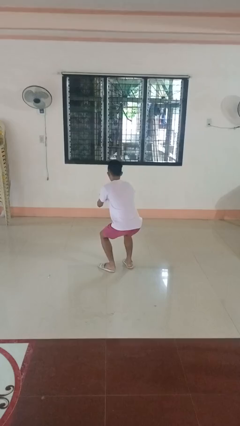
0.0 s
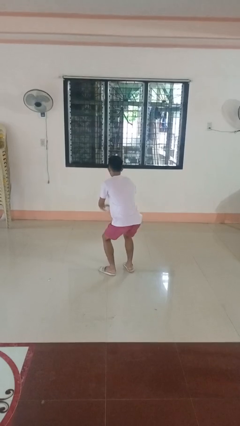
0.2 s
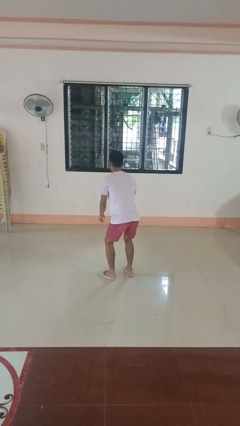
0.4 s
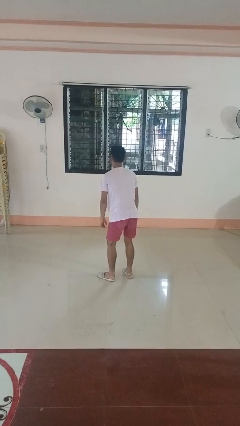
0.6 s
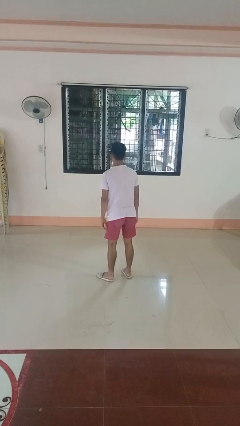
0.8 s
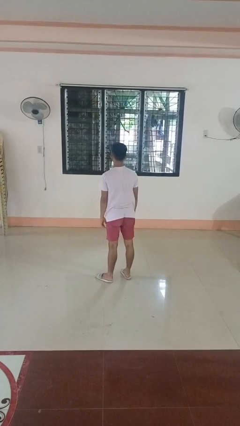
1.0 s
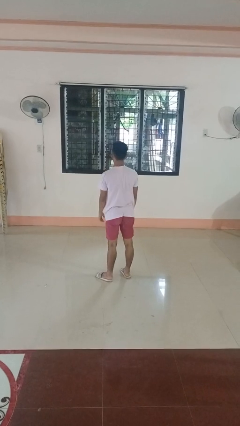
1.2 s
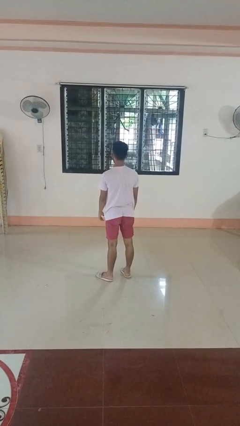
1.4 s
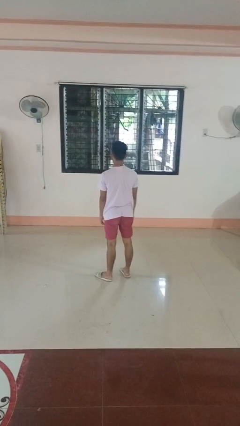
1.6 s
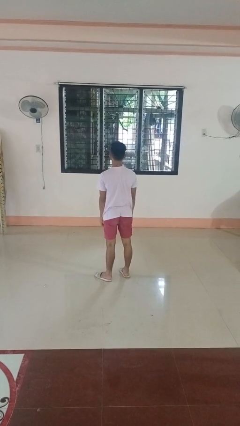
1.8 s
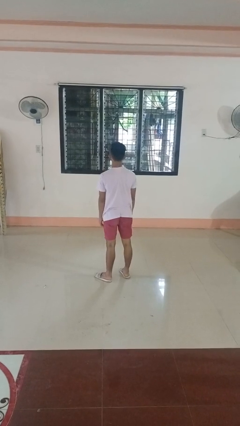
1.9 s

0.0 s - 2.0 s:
person stands up

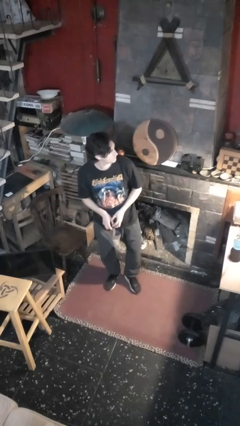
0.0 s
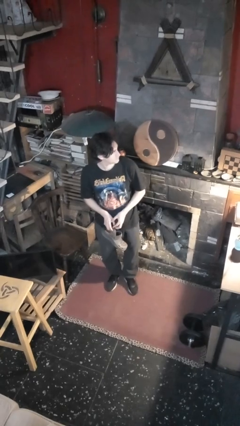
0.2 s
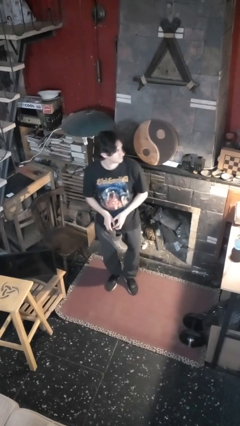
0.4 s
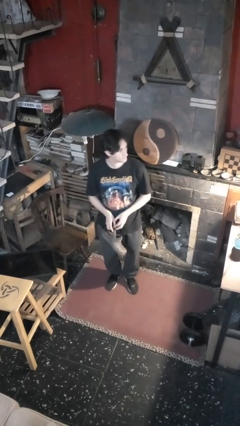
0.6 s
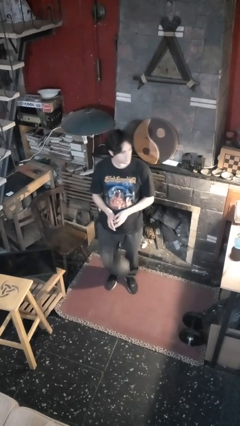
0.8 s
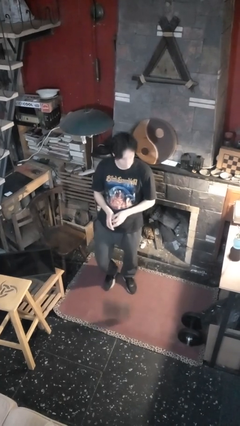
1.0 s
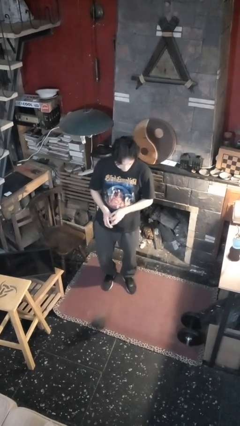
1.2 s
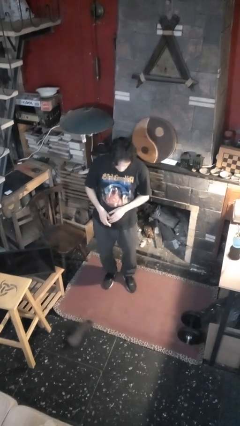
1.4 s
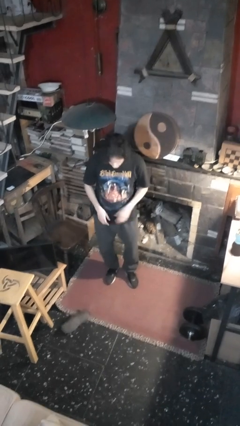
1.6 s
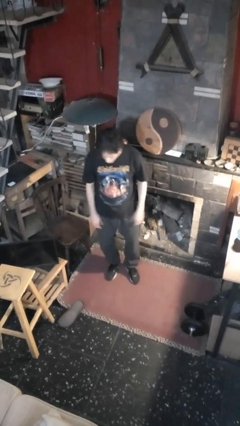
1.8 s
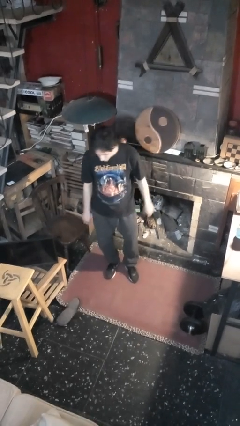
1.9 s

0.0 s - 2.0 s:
person drops object

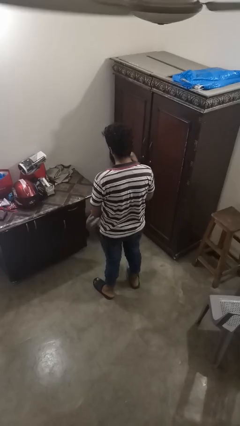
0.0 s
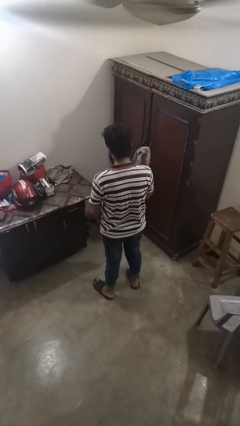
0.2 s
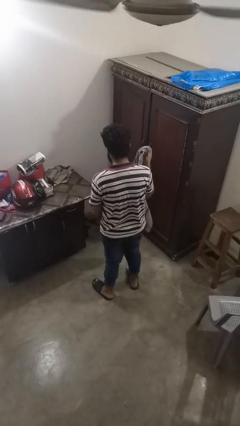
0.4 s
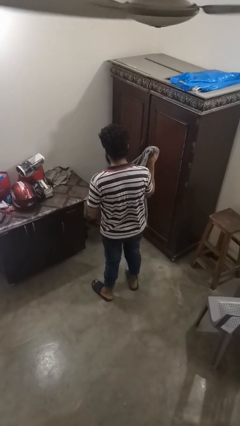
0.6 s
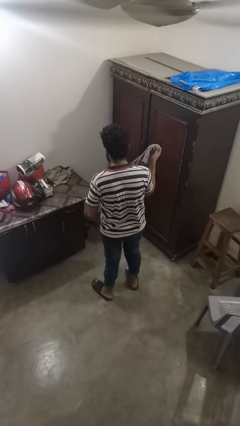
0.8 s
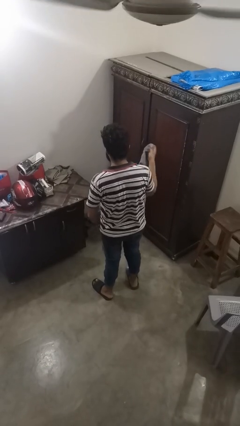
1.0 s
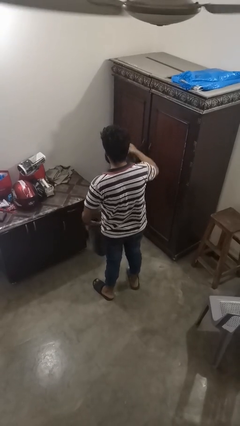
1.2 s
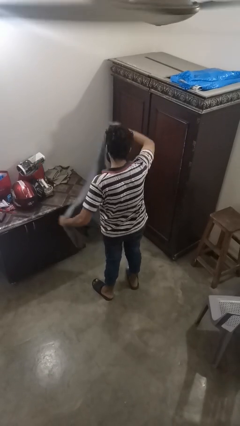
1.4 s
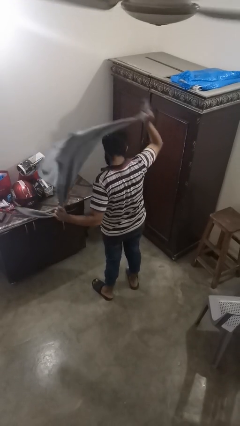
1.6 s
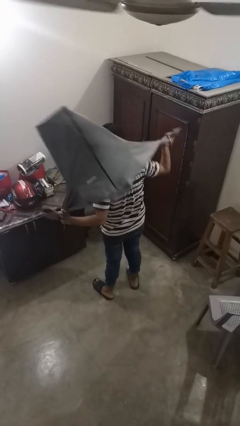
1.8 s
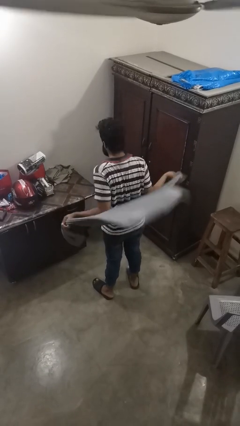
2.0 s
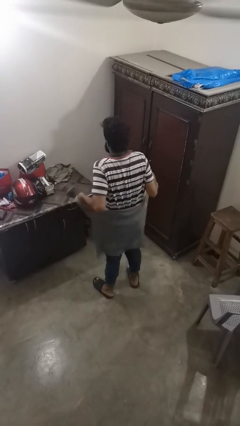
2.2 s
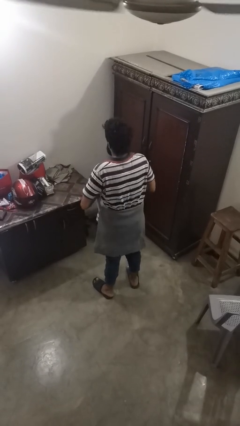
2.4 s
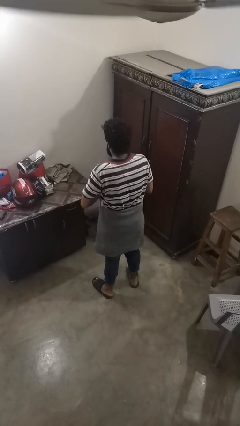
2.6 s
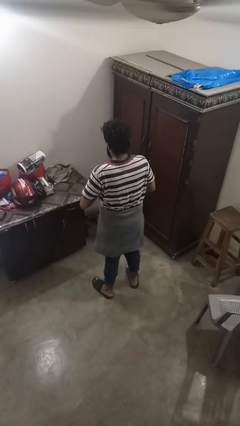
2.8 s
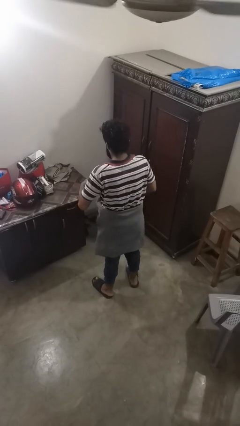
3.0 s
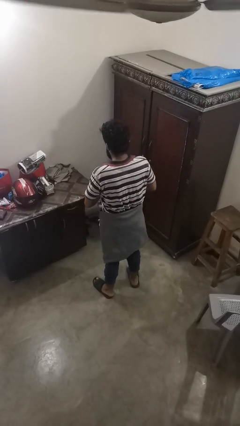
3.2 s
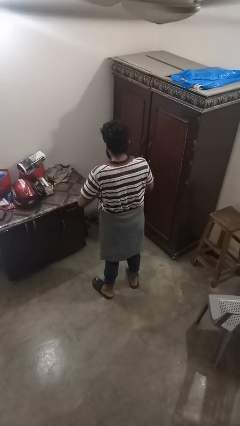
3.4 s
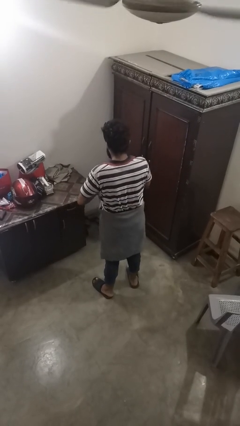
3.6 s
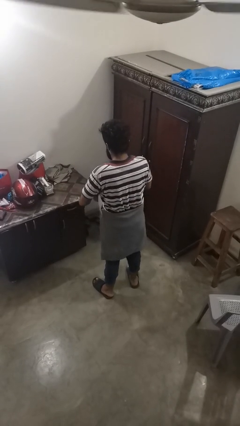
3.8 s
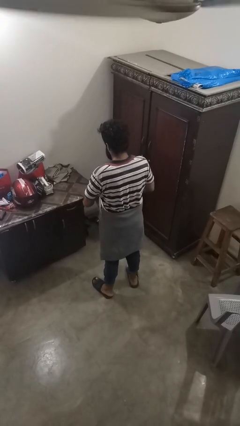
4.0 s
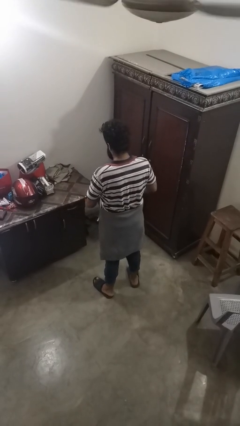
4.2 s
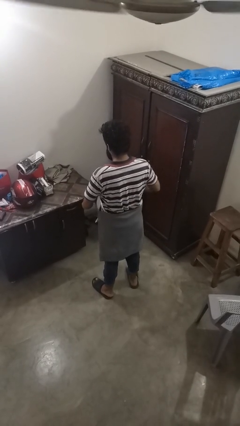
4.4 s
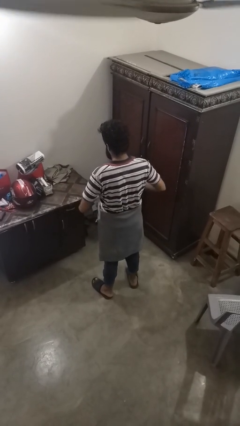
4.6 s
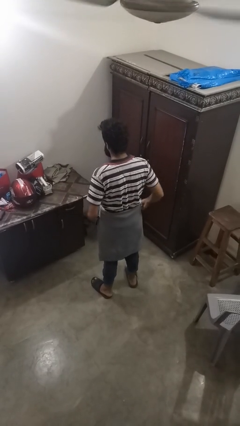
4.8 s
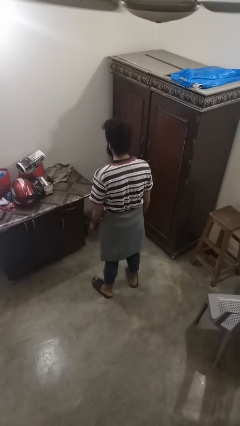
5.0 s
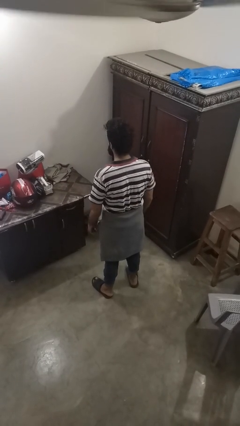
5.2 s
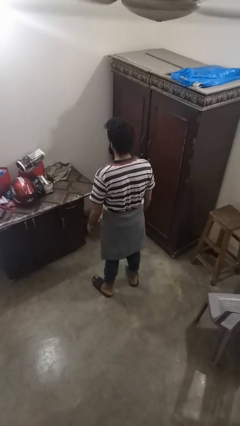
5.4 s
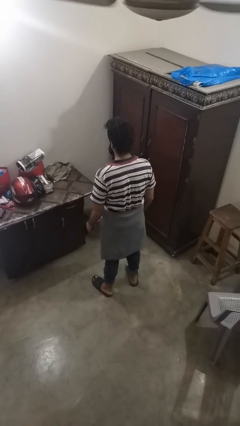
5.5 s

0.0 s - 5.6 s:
person ties jacket around waist

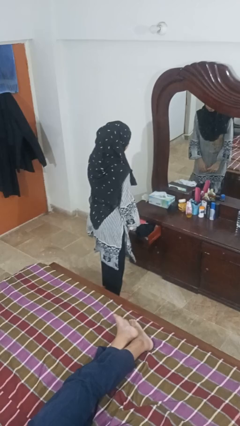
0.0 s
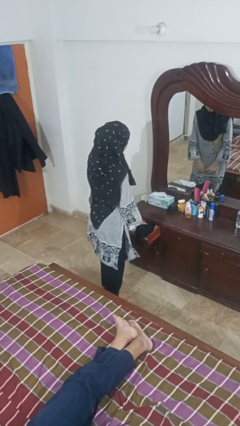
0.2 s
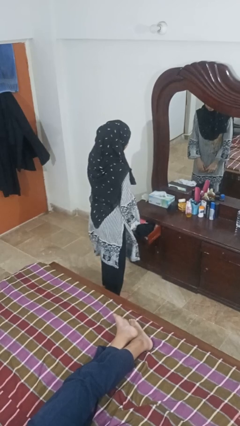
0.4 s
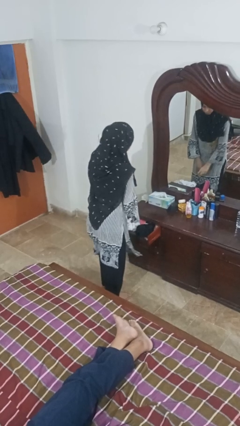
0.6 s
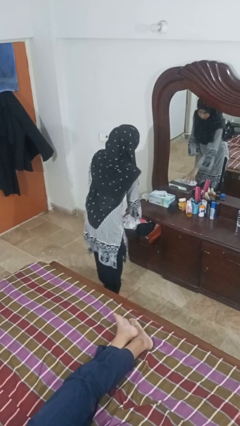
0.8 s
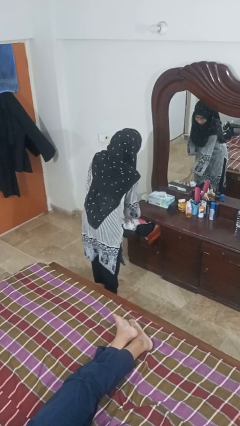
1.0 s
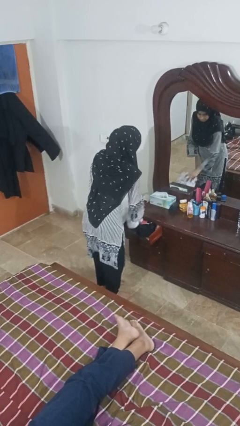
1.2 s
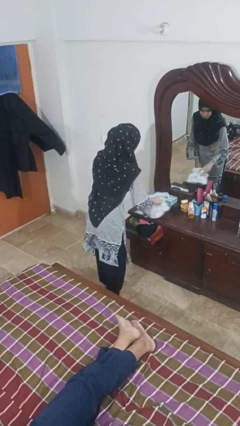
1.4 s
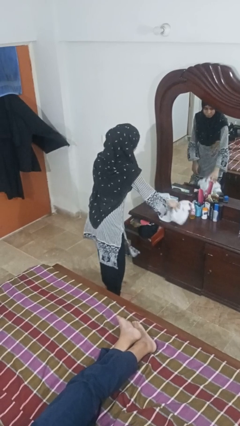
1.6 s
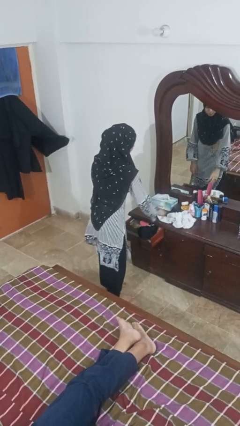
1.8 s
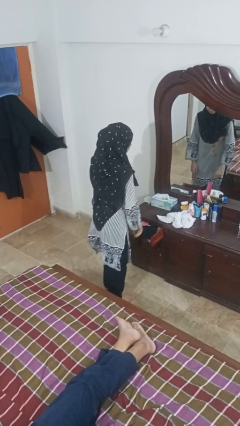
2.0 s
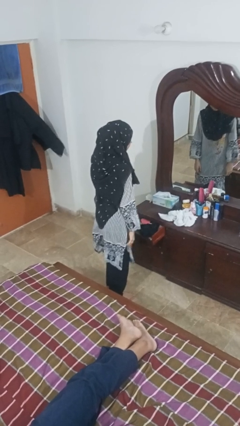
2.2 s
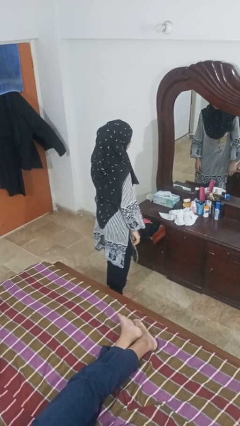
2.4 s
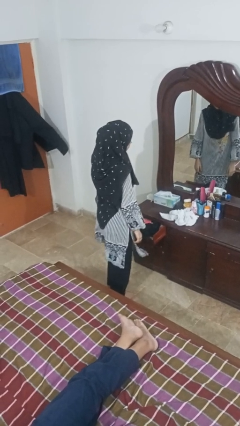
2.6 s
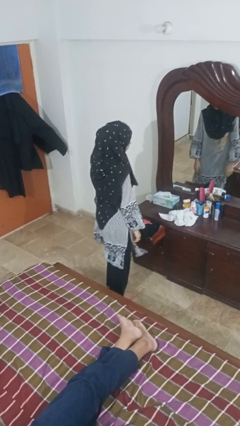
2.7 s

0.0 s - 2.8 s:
person takes clothes from dresser

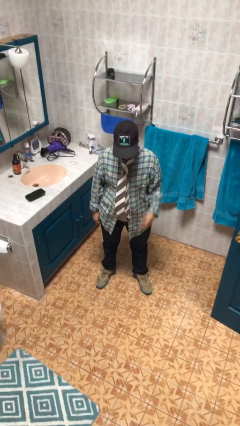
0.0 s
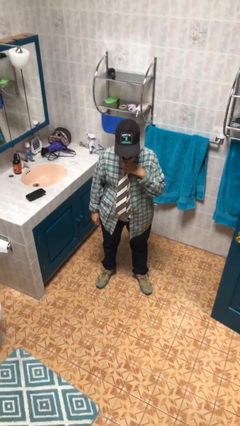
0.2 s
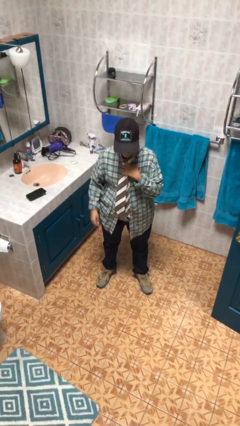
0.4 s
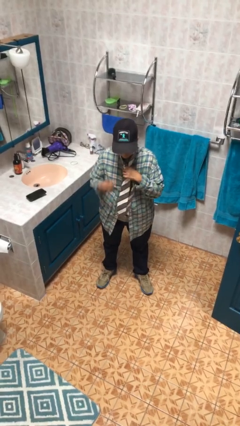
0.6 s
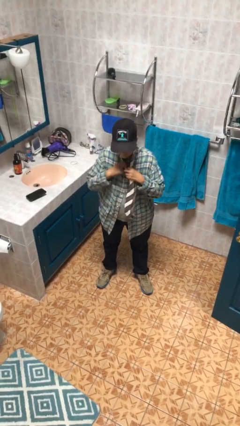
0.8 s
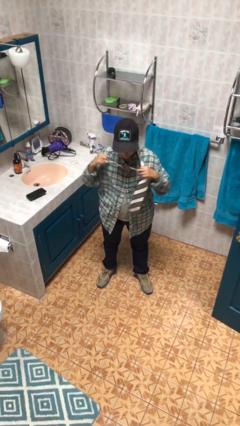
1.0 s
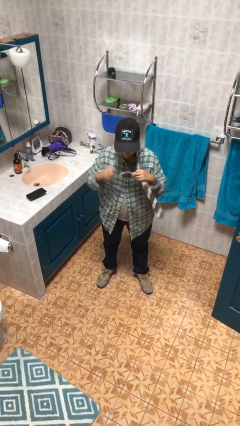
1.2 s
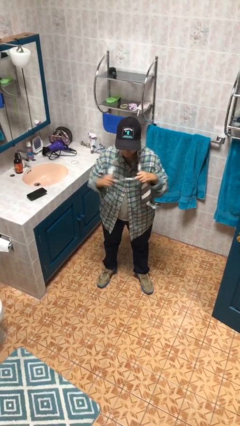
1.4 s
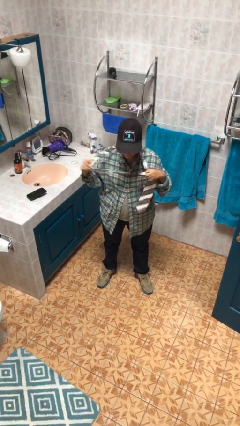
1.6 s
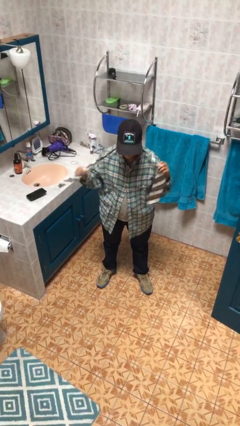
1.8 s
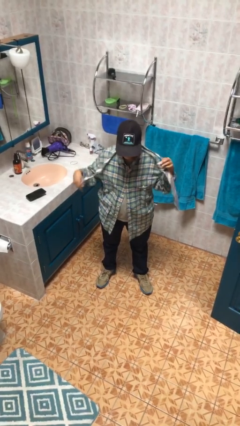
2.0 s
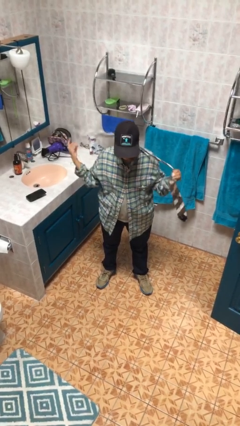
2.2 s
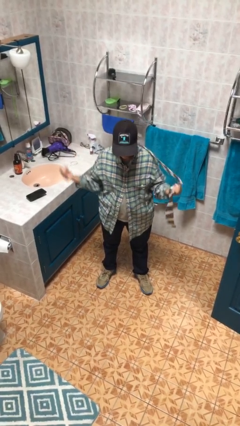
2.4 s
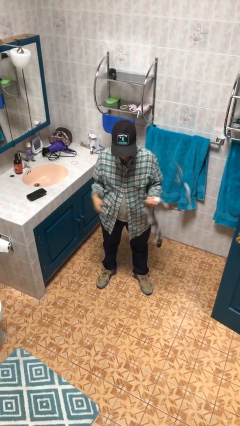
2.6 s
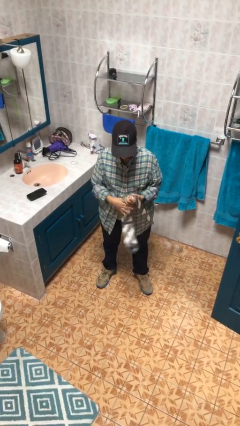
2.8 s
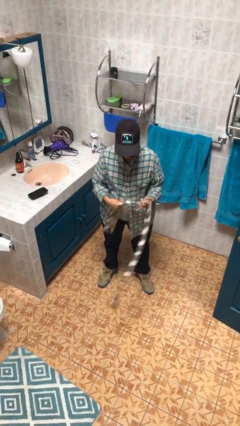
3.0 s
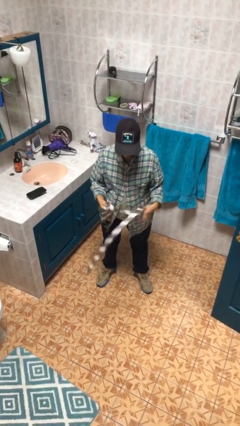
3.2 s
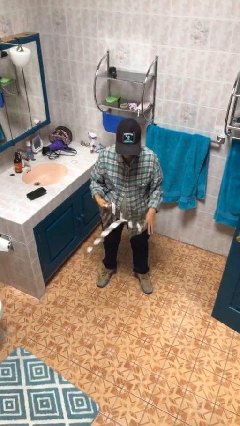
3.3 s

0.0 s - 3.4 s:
person takes off necktie

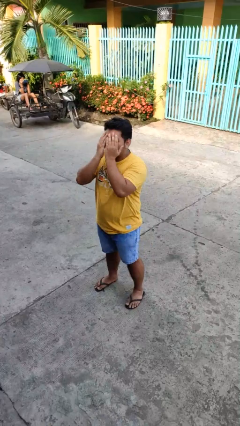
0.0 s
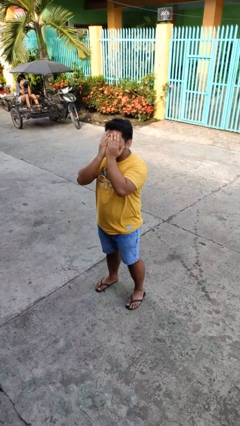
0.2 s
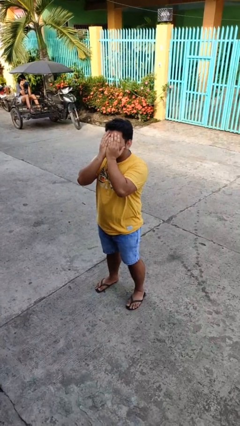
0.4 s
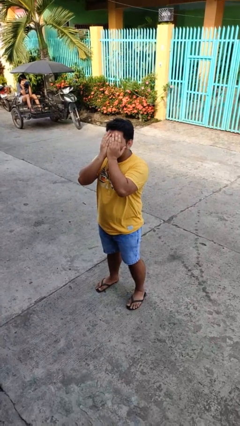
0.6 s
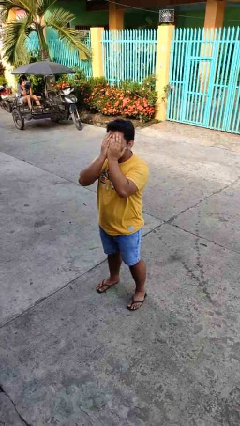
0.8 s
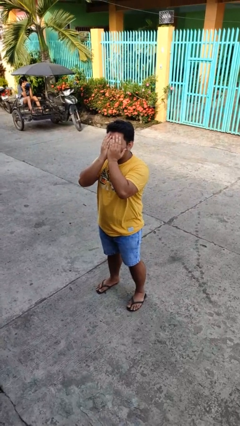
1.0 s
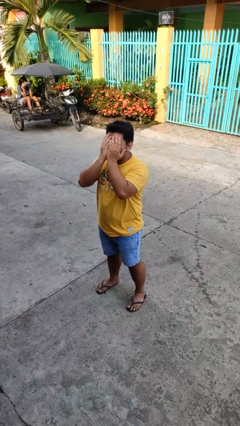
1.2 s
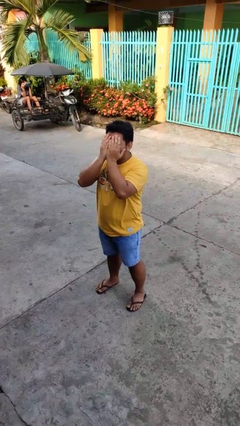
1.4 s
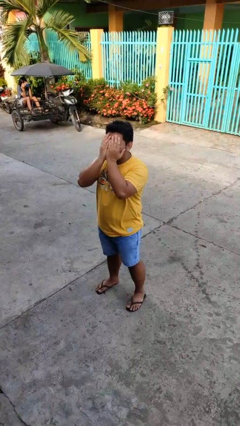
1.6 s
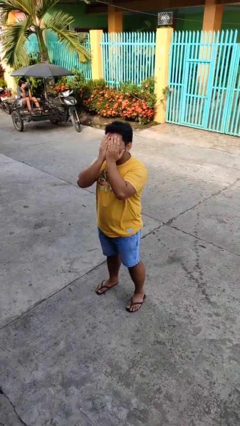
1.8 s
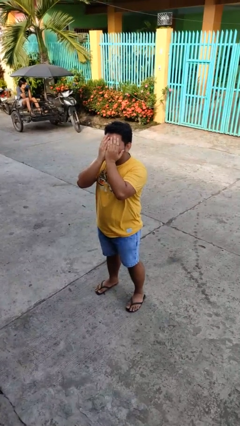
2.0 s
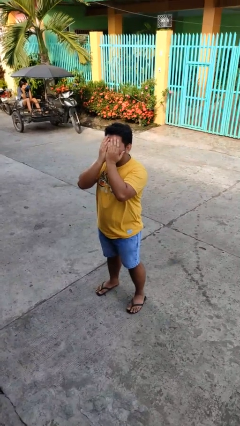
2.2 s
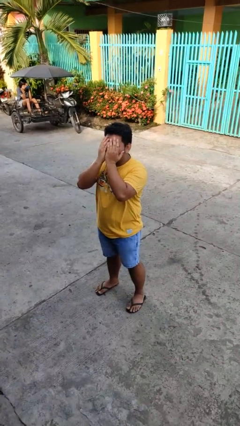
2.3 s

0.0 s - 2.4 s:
person covers face with hands
